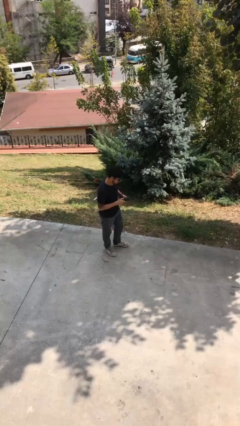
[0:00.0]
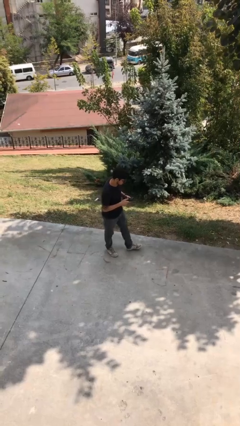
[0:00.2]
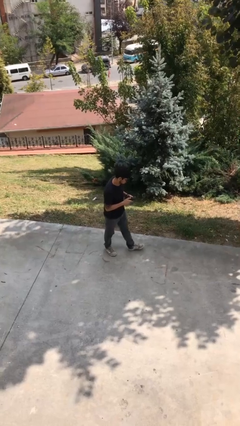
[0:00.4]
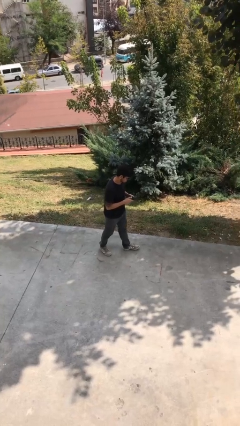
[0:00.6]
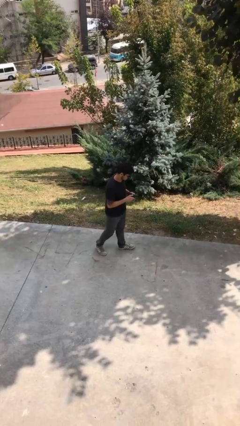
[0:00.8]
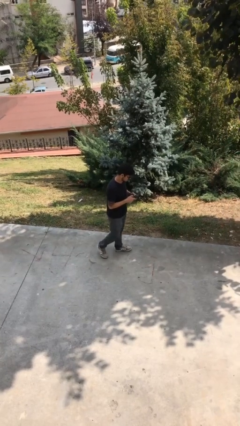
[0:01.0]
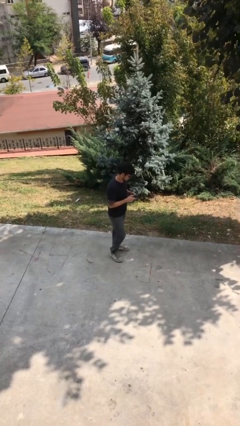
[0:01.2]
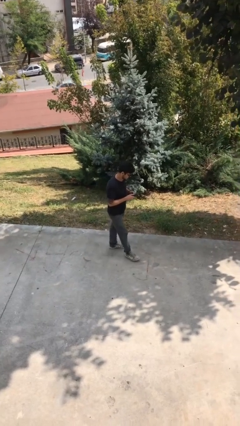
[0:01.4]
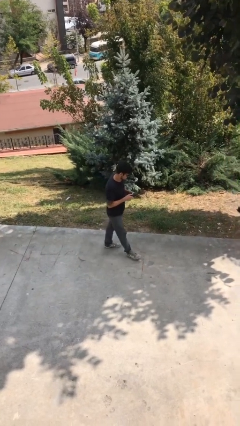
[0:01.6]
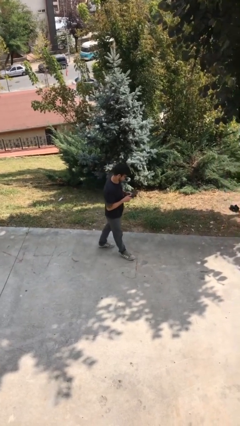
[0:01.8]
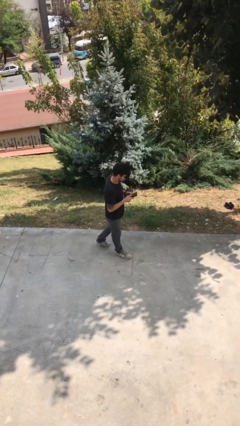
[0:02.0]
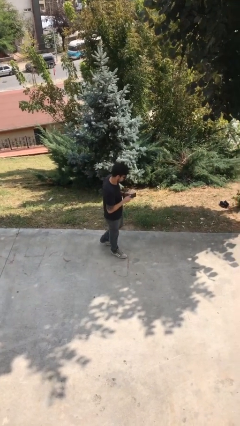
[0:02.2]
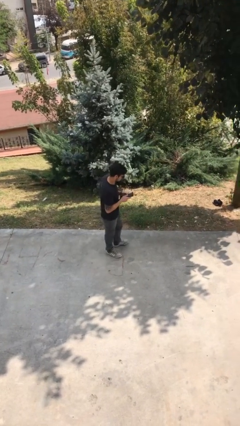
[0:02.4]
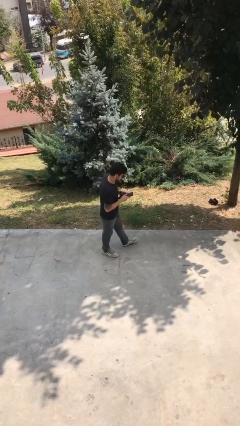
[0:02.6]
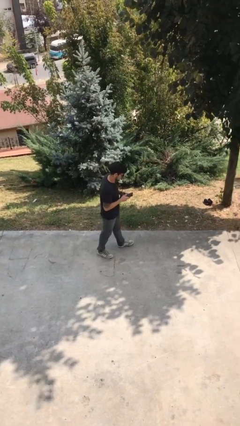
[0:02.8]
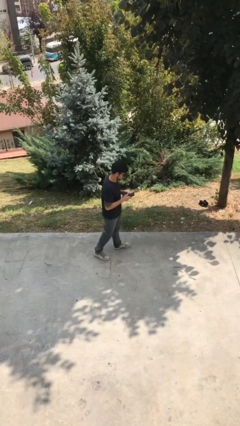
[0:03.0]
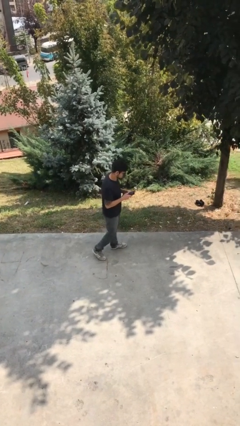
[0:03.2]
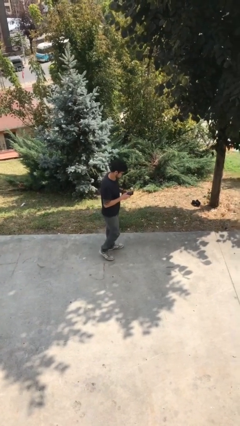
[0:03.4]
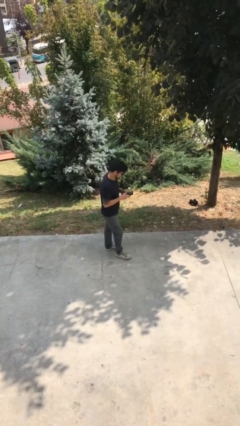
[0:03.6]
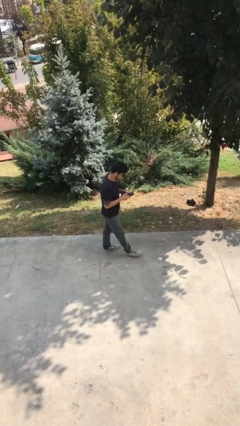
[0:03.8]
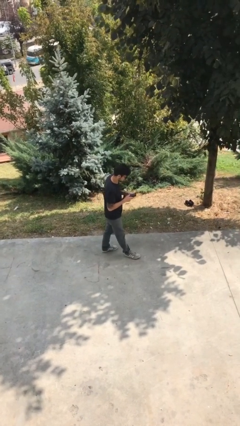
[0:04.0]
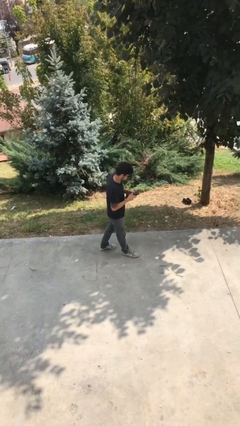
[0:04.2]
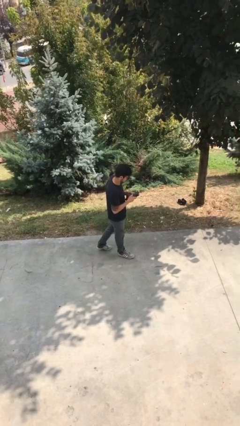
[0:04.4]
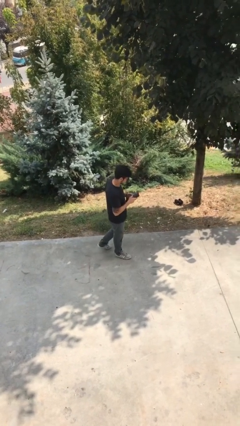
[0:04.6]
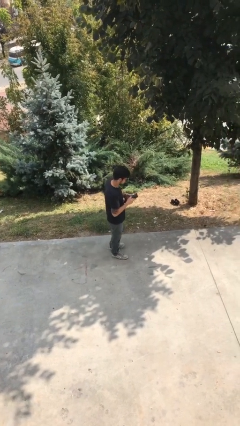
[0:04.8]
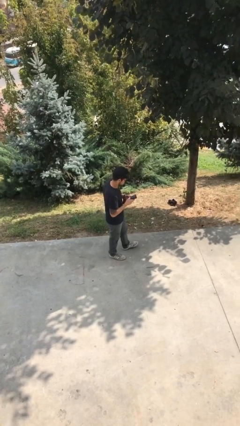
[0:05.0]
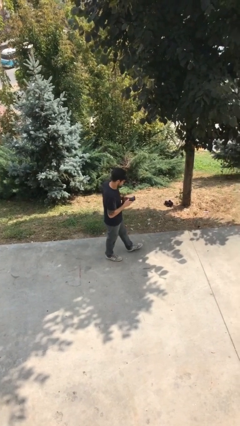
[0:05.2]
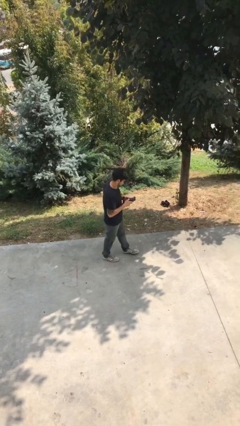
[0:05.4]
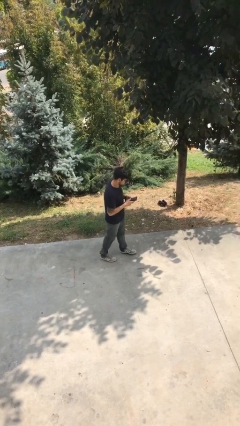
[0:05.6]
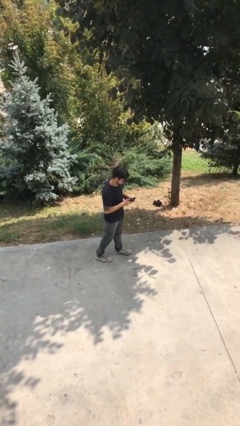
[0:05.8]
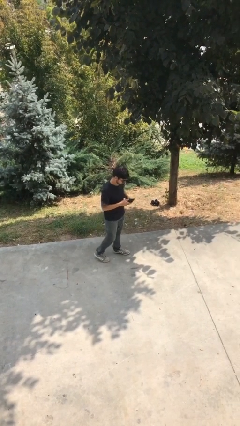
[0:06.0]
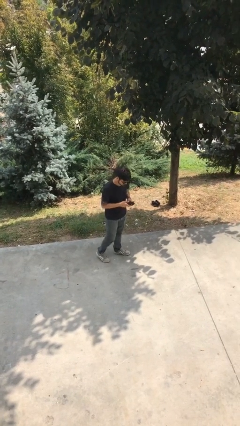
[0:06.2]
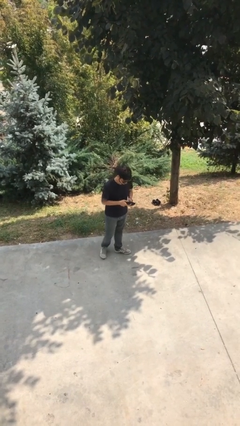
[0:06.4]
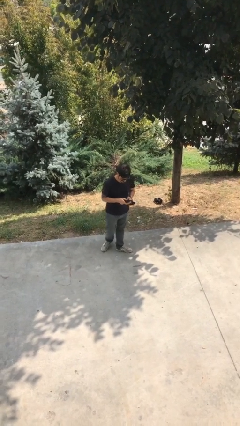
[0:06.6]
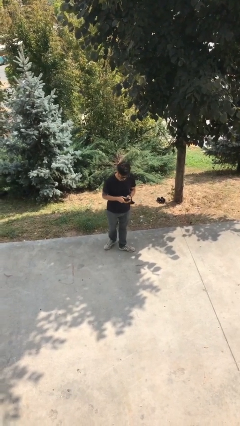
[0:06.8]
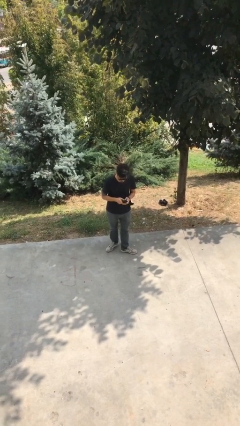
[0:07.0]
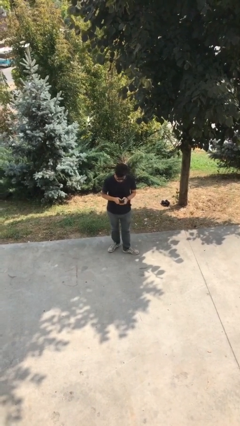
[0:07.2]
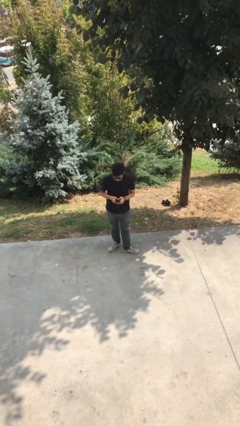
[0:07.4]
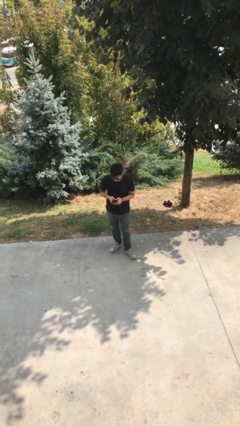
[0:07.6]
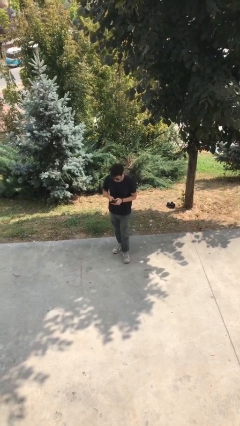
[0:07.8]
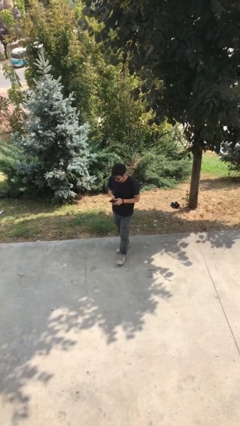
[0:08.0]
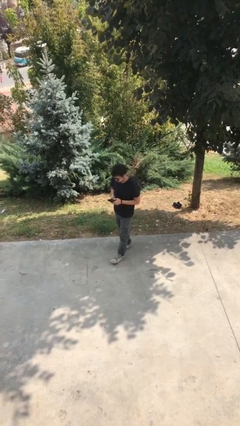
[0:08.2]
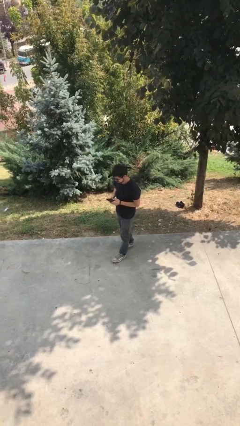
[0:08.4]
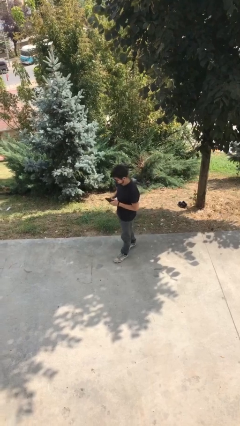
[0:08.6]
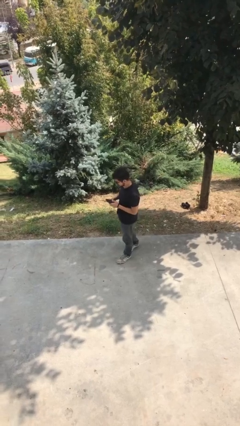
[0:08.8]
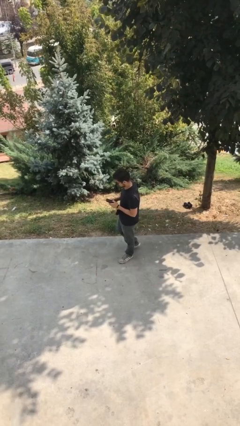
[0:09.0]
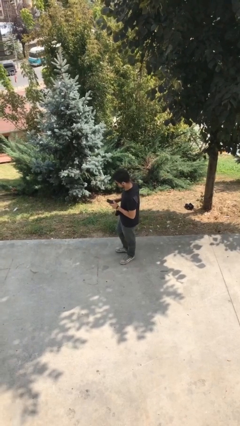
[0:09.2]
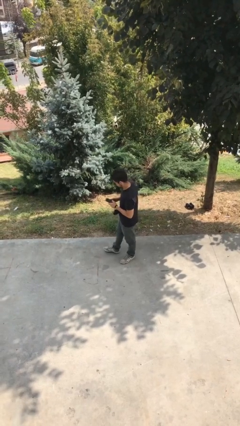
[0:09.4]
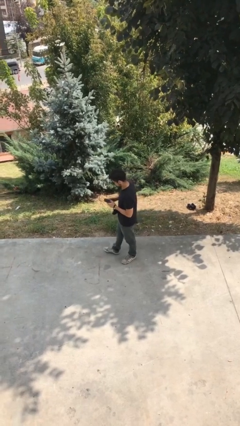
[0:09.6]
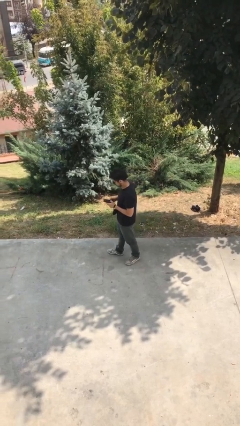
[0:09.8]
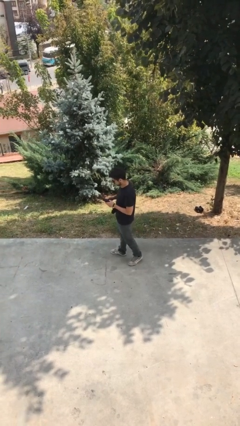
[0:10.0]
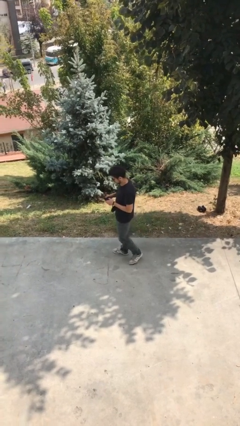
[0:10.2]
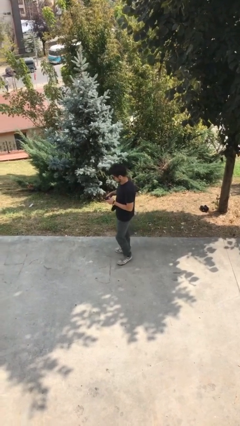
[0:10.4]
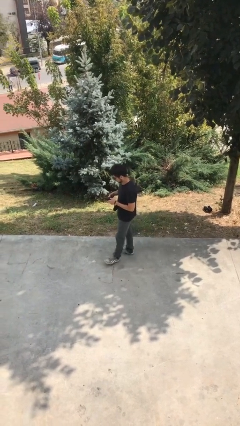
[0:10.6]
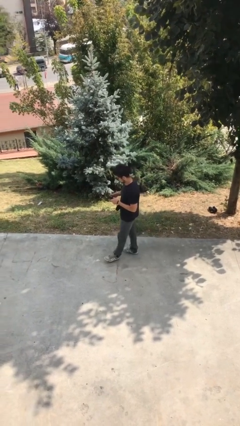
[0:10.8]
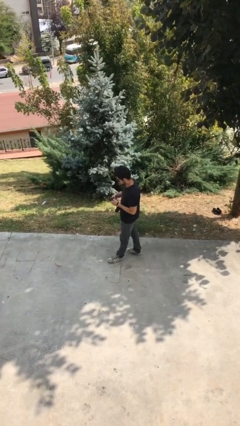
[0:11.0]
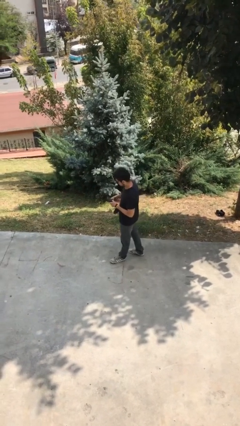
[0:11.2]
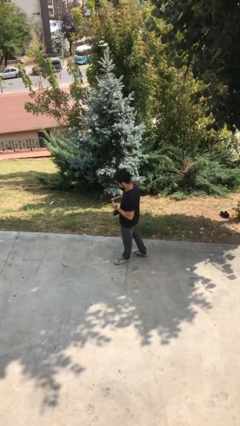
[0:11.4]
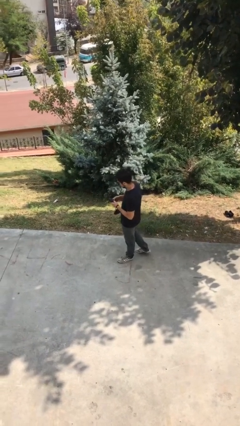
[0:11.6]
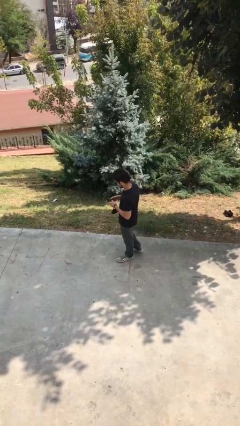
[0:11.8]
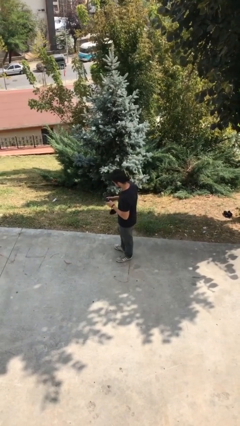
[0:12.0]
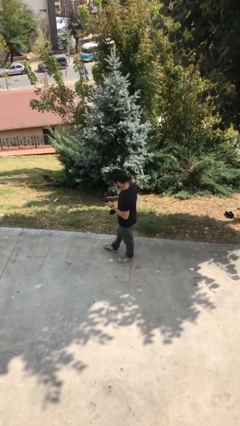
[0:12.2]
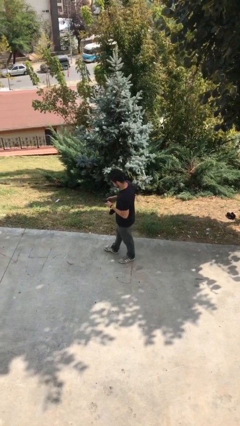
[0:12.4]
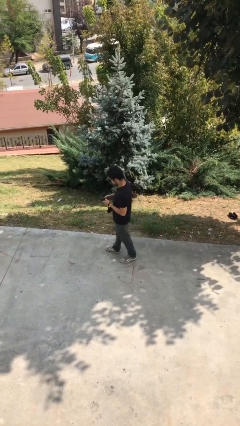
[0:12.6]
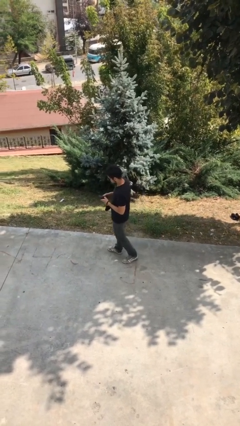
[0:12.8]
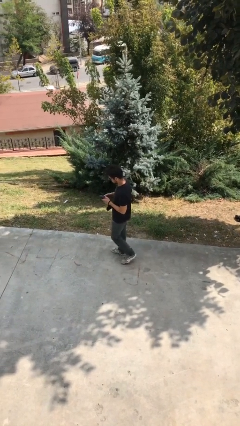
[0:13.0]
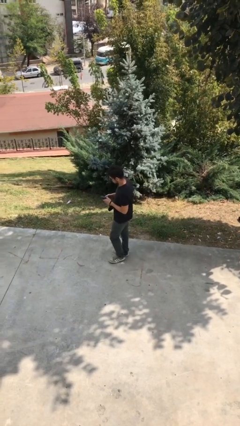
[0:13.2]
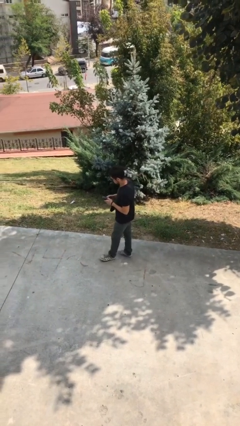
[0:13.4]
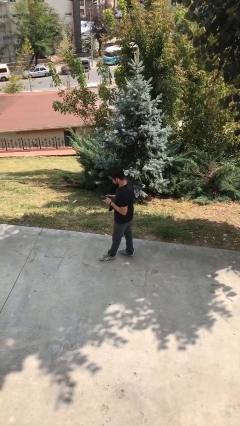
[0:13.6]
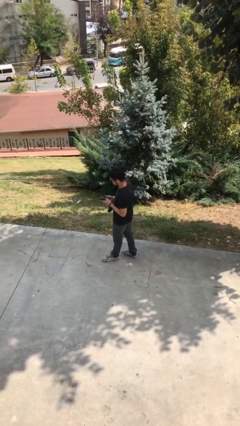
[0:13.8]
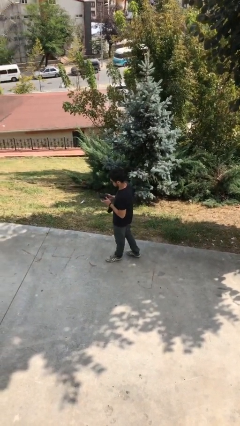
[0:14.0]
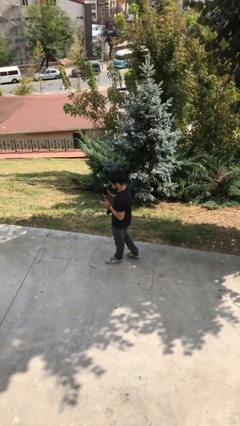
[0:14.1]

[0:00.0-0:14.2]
person texts on phone

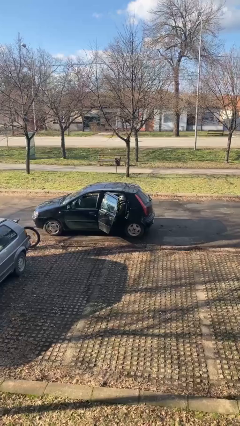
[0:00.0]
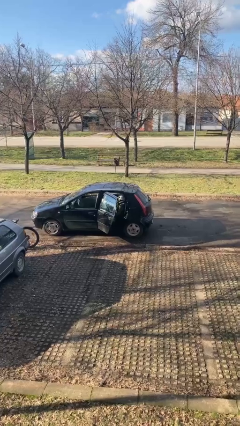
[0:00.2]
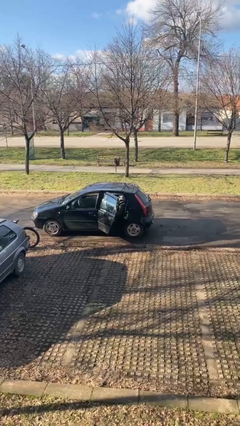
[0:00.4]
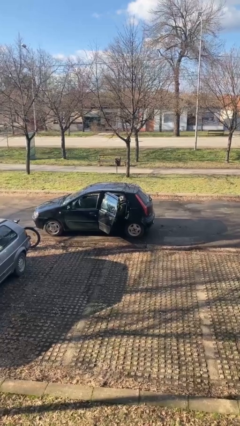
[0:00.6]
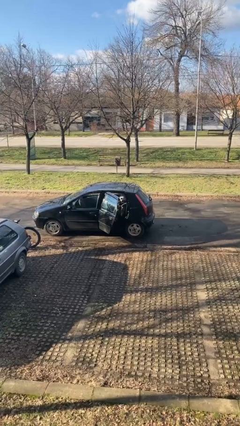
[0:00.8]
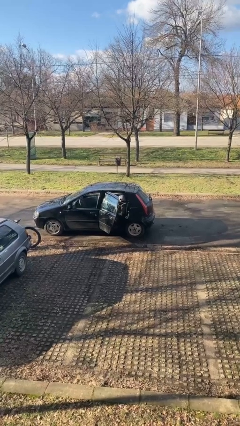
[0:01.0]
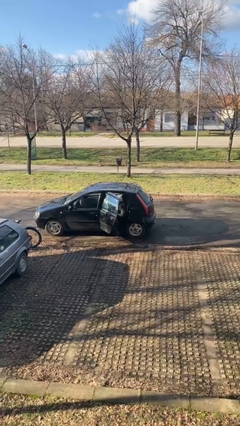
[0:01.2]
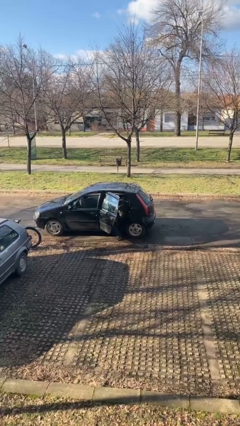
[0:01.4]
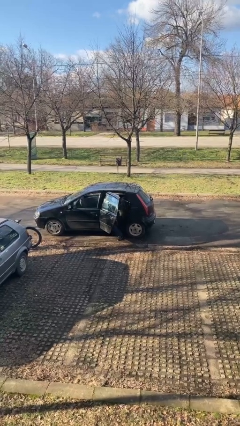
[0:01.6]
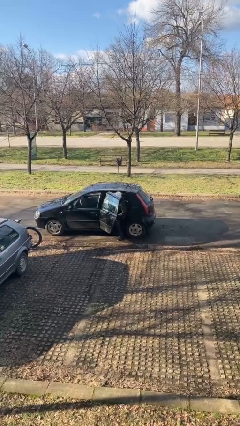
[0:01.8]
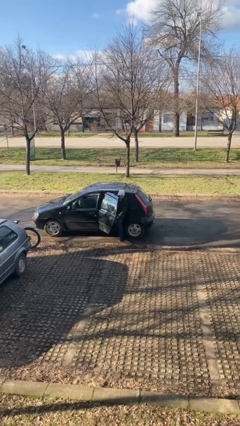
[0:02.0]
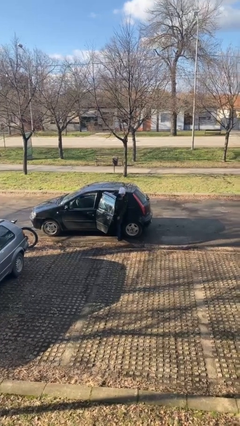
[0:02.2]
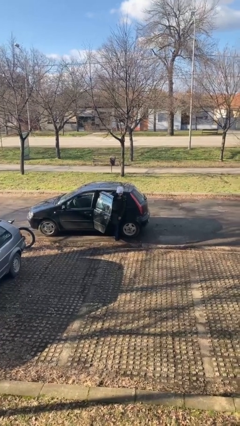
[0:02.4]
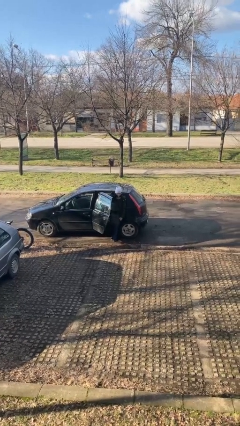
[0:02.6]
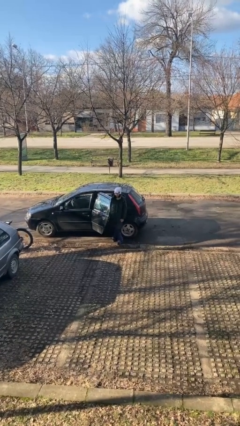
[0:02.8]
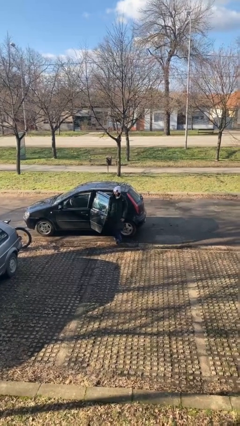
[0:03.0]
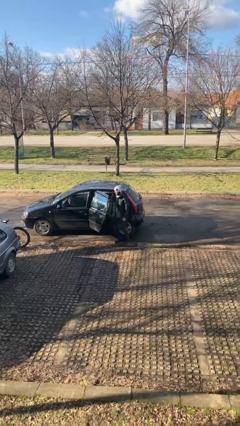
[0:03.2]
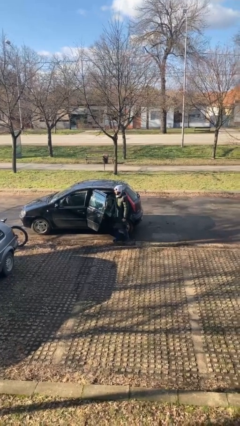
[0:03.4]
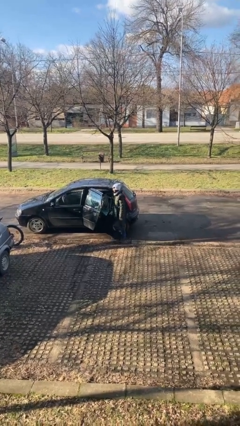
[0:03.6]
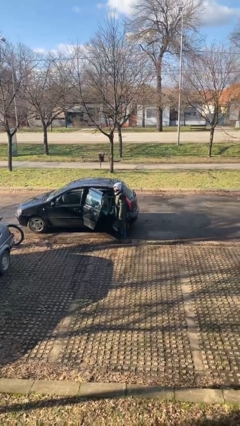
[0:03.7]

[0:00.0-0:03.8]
person exits car

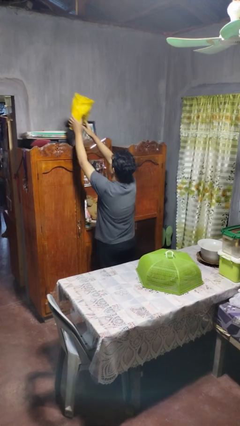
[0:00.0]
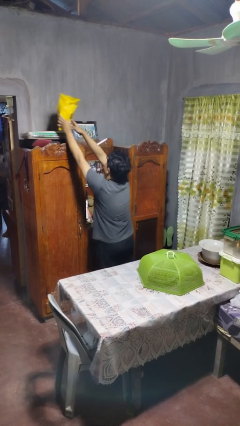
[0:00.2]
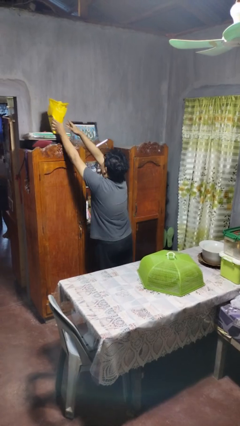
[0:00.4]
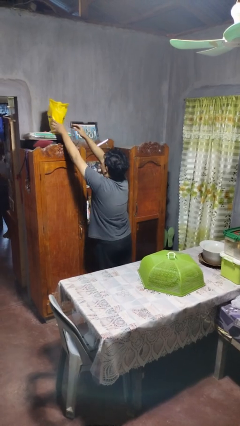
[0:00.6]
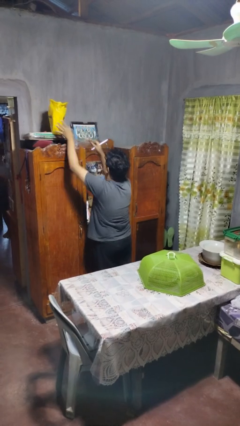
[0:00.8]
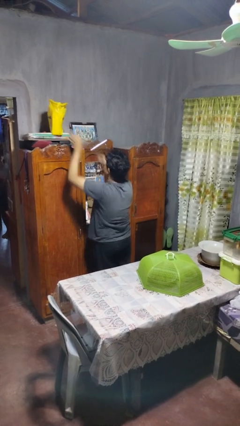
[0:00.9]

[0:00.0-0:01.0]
person puts down object on shelf
